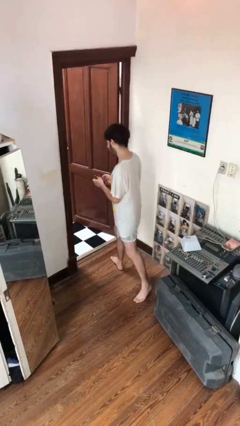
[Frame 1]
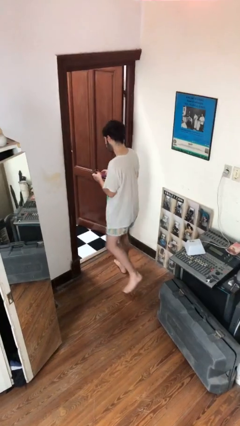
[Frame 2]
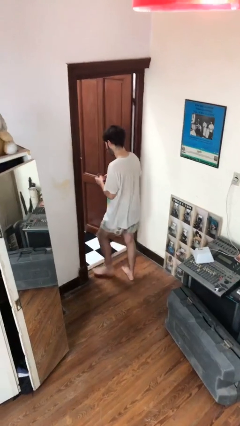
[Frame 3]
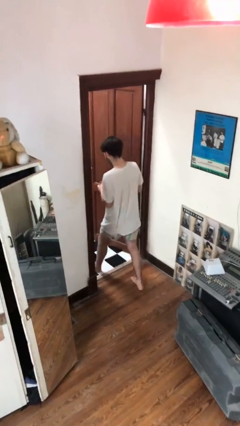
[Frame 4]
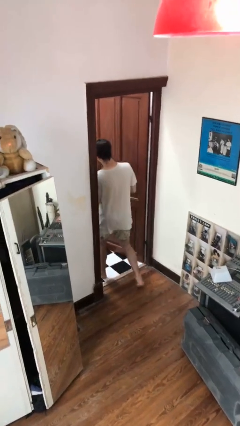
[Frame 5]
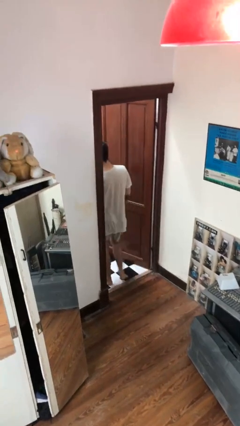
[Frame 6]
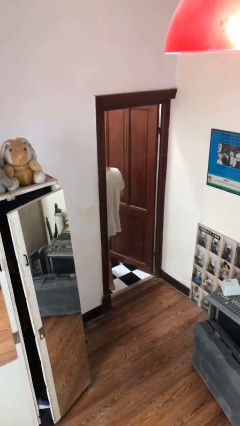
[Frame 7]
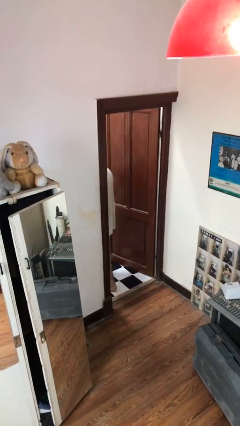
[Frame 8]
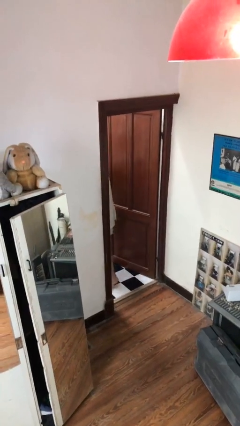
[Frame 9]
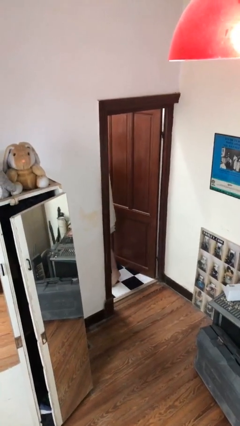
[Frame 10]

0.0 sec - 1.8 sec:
person exits scene through structure

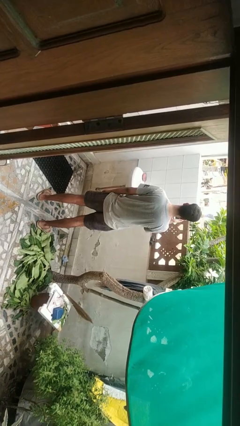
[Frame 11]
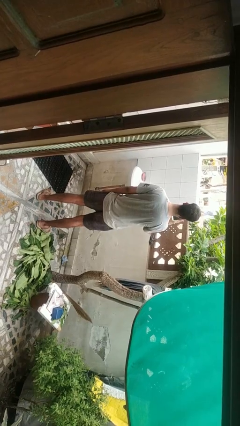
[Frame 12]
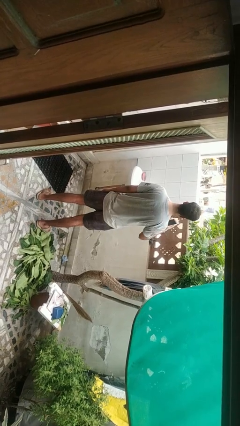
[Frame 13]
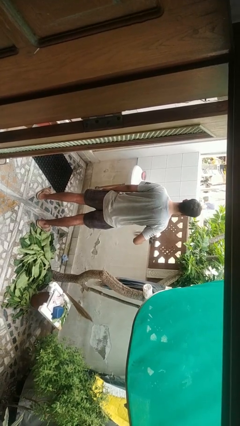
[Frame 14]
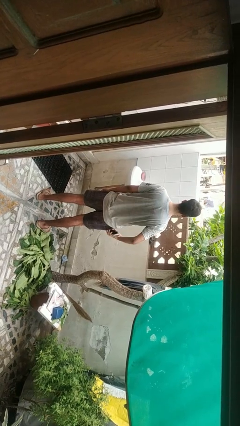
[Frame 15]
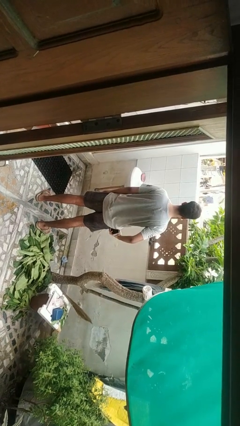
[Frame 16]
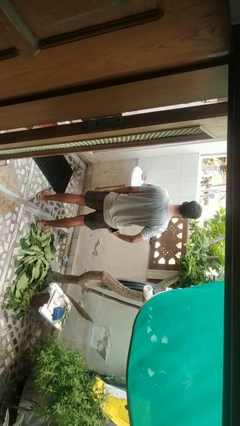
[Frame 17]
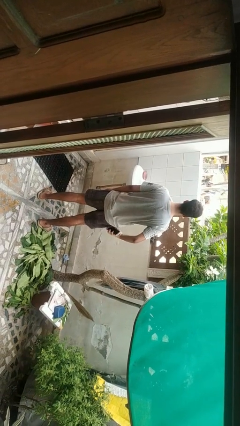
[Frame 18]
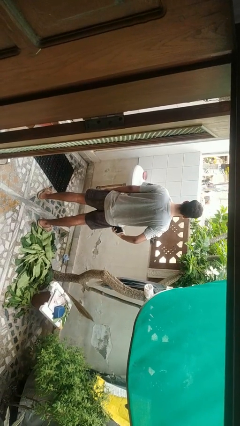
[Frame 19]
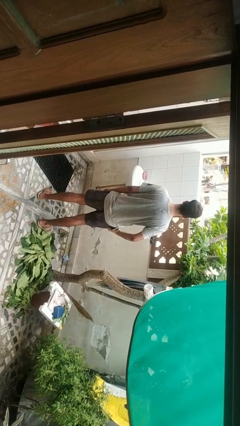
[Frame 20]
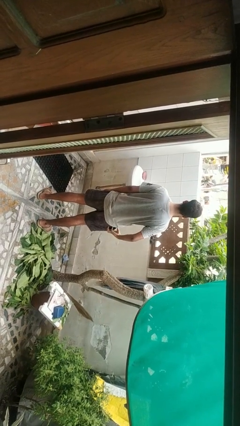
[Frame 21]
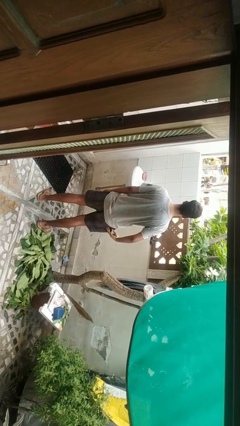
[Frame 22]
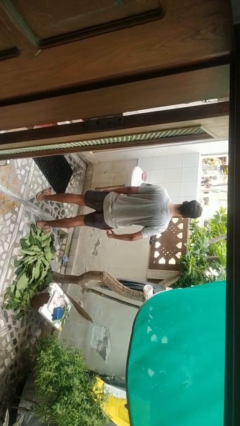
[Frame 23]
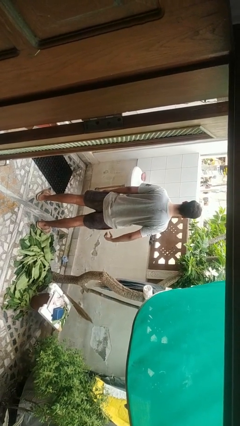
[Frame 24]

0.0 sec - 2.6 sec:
person puts phone into pocket

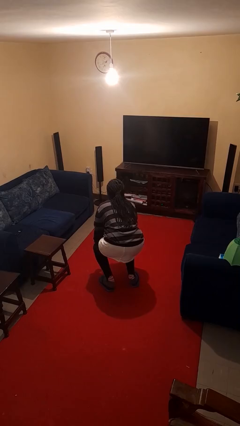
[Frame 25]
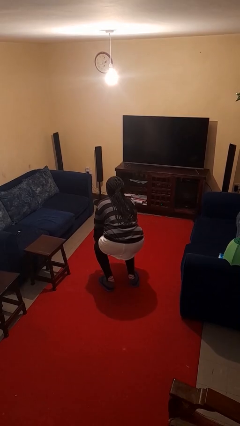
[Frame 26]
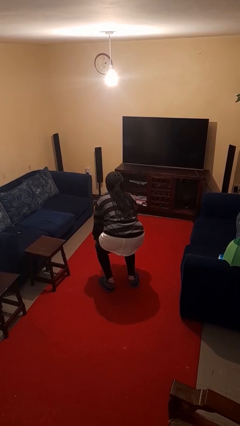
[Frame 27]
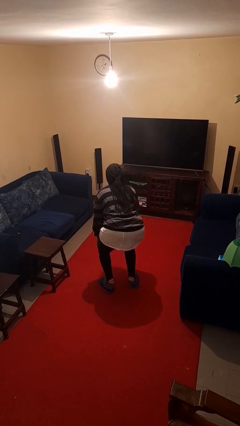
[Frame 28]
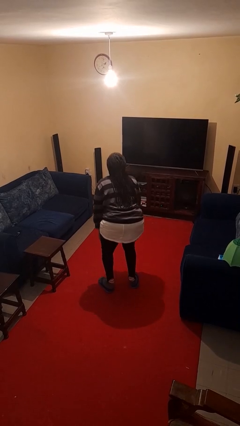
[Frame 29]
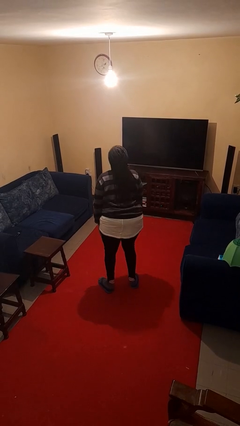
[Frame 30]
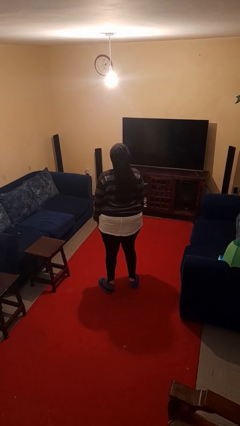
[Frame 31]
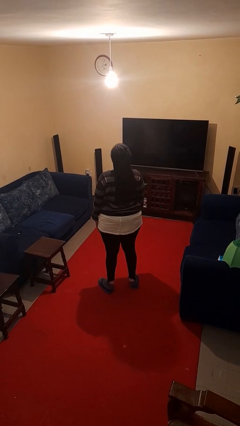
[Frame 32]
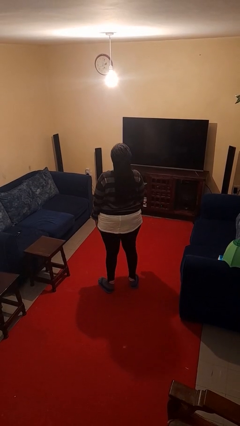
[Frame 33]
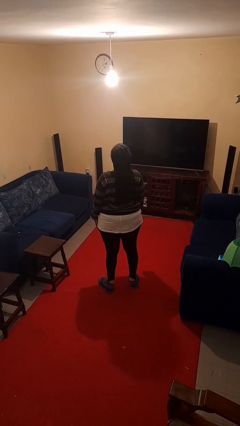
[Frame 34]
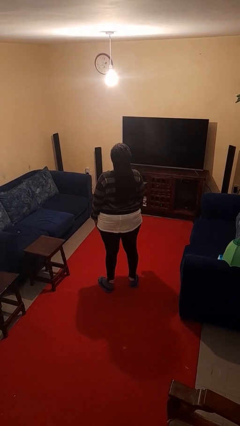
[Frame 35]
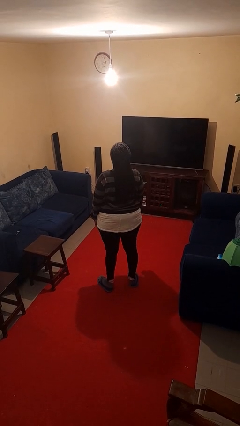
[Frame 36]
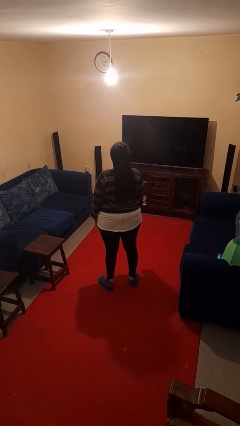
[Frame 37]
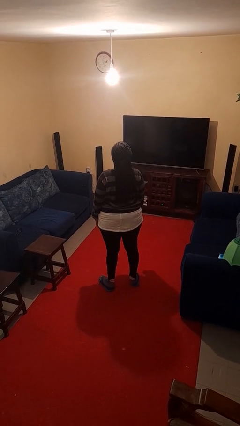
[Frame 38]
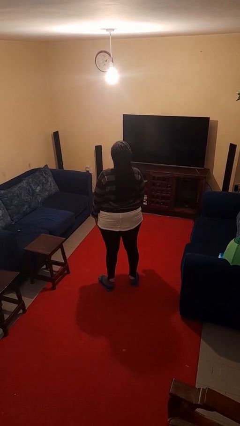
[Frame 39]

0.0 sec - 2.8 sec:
person stands up

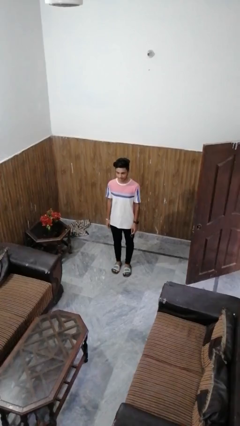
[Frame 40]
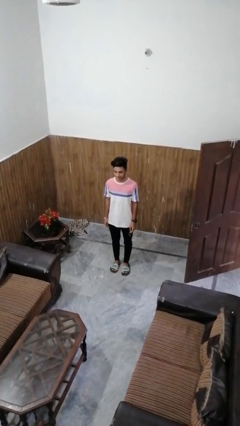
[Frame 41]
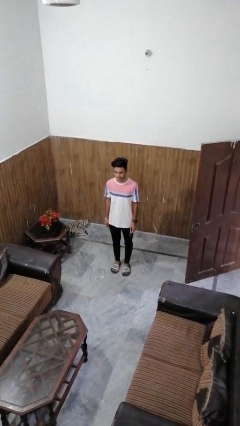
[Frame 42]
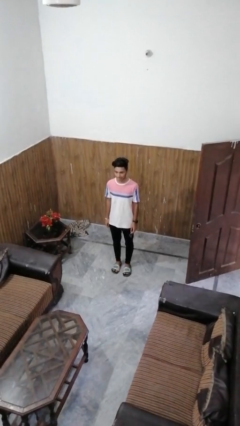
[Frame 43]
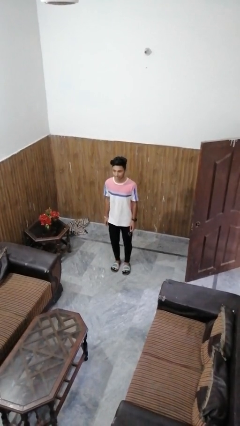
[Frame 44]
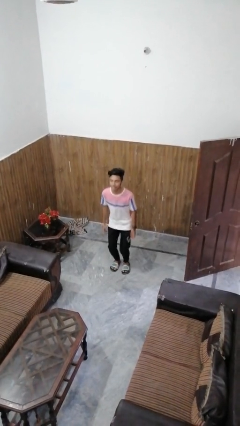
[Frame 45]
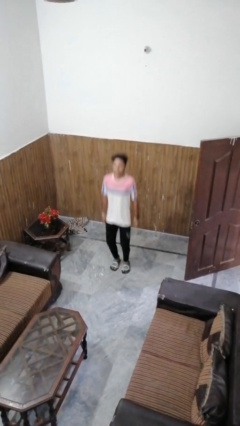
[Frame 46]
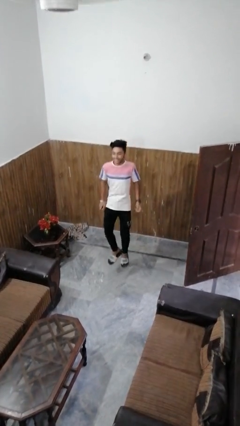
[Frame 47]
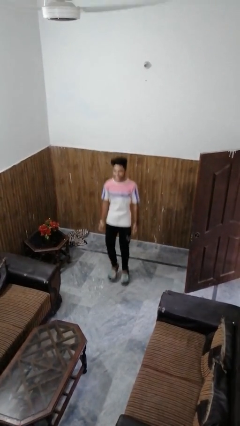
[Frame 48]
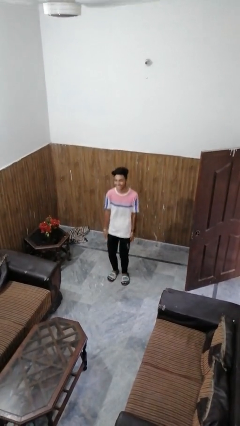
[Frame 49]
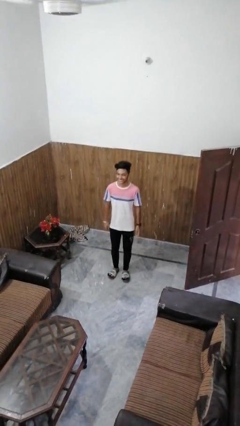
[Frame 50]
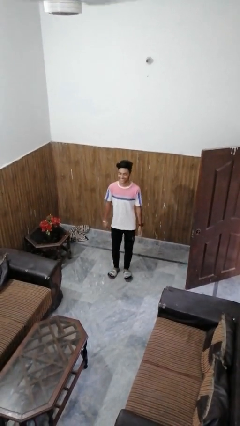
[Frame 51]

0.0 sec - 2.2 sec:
person jumps

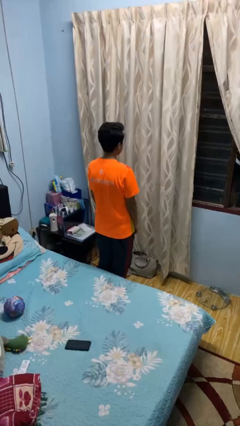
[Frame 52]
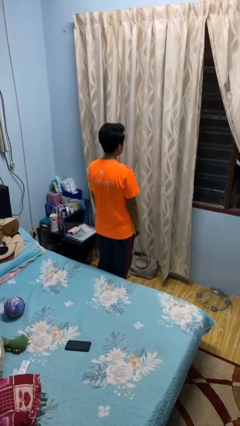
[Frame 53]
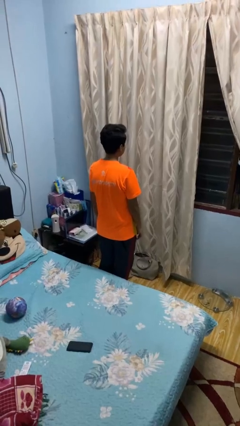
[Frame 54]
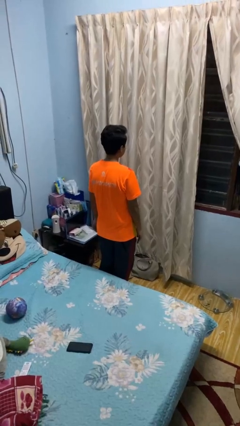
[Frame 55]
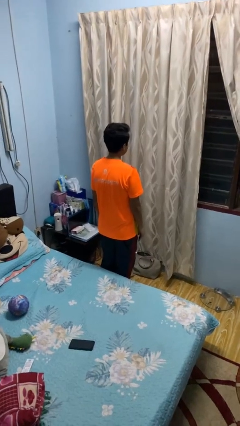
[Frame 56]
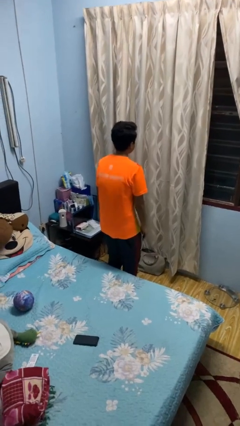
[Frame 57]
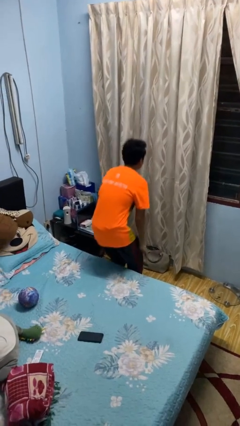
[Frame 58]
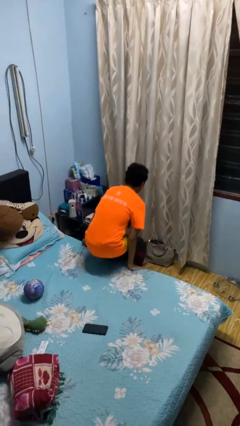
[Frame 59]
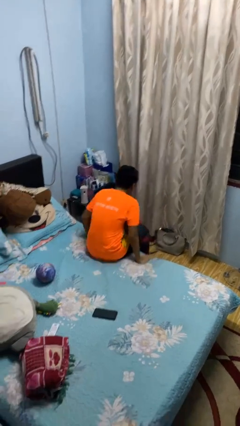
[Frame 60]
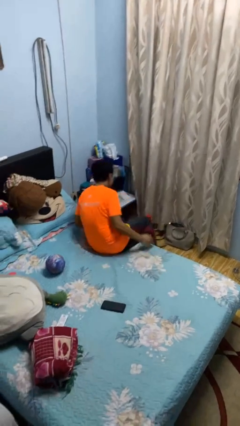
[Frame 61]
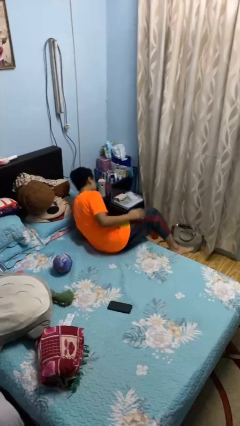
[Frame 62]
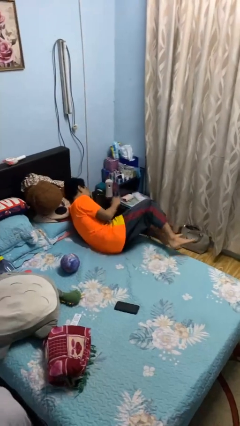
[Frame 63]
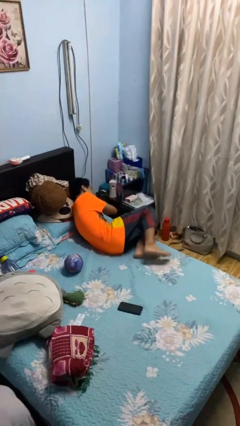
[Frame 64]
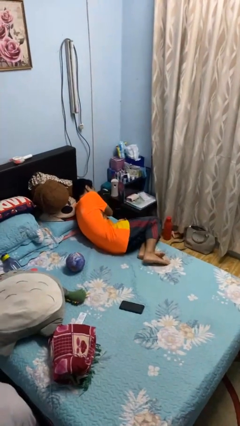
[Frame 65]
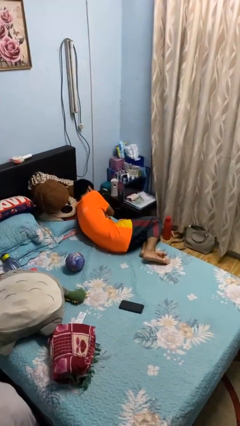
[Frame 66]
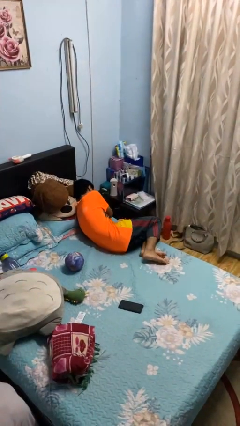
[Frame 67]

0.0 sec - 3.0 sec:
person lies down on bed

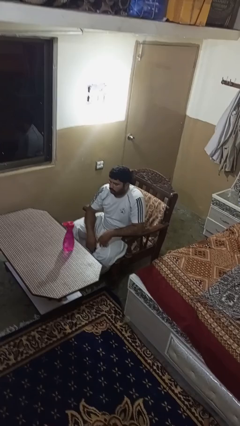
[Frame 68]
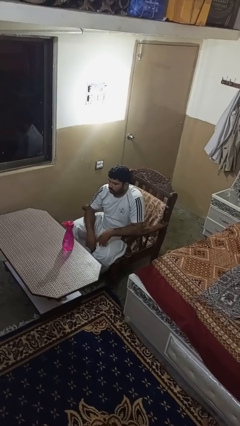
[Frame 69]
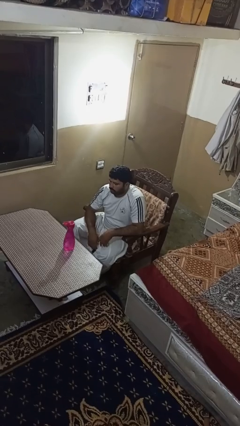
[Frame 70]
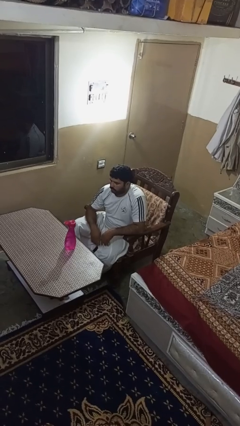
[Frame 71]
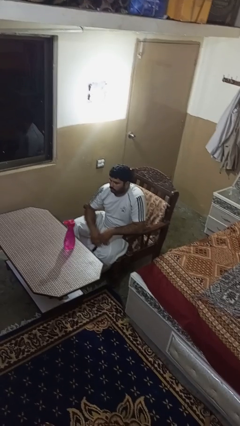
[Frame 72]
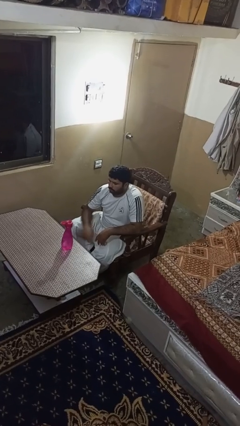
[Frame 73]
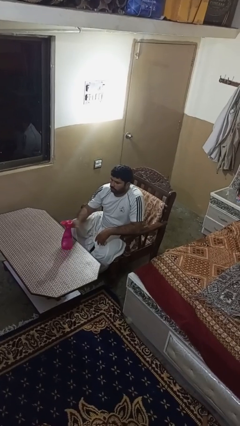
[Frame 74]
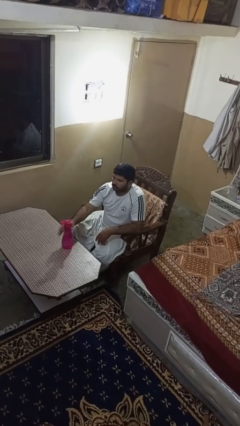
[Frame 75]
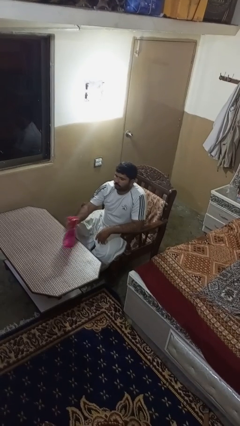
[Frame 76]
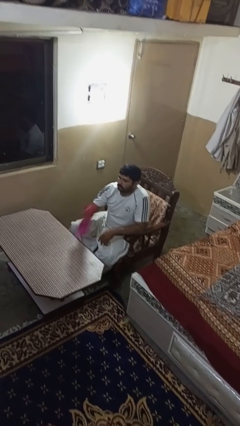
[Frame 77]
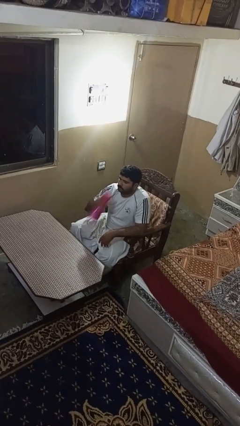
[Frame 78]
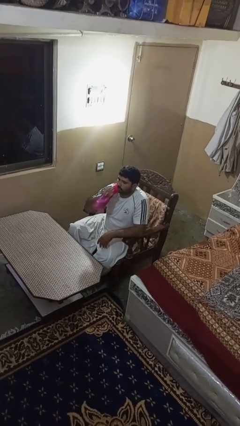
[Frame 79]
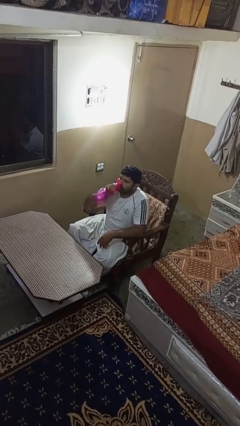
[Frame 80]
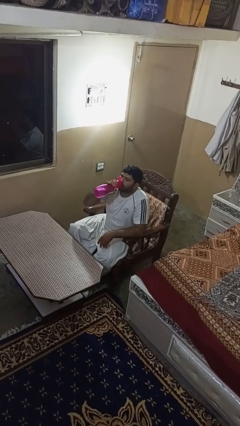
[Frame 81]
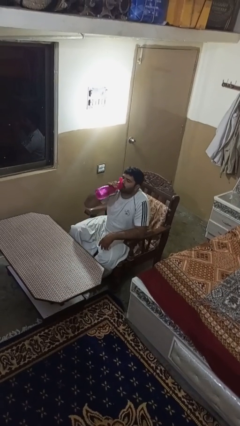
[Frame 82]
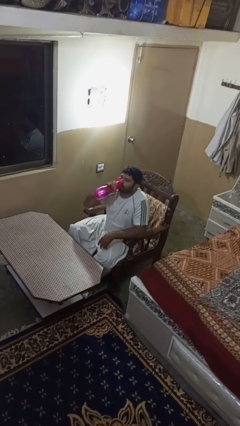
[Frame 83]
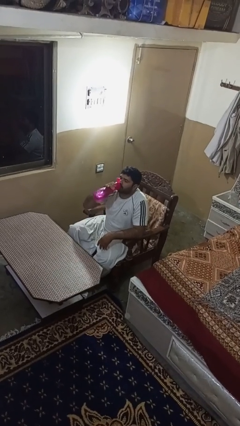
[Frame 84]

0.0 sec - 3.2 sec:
person drinks from bottle

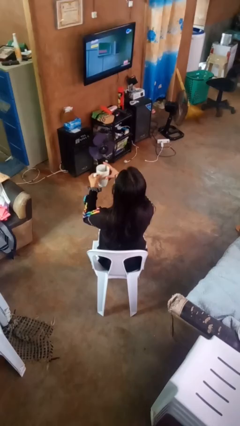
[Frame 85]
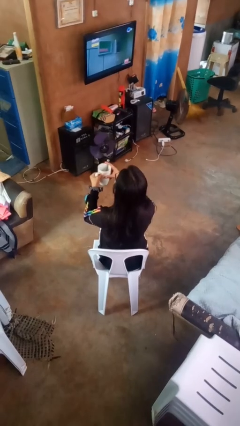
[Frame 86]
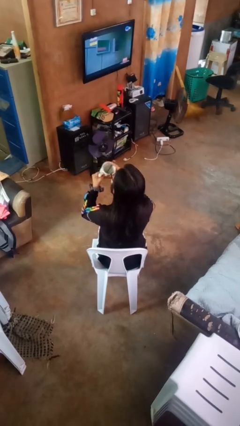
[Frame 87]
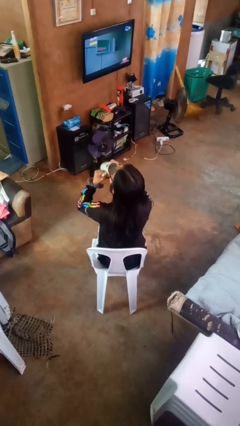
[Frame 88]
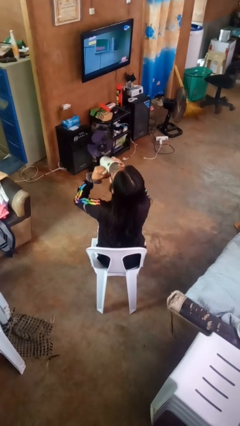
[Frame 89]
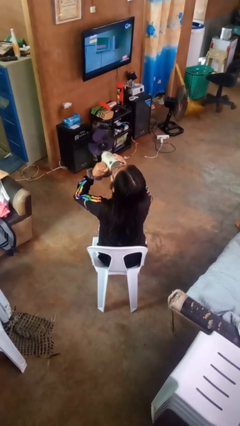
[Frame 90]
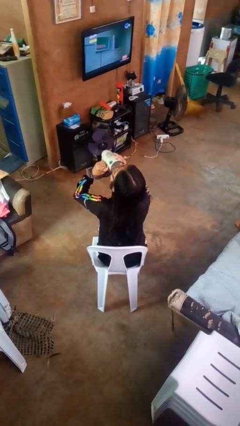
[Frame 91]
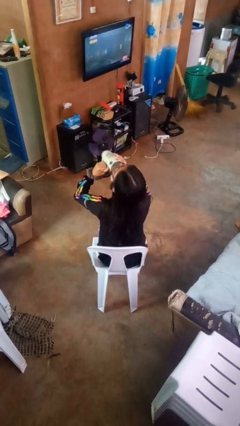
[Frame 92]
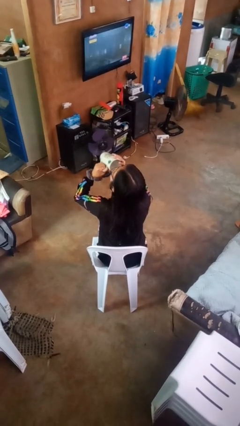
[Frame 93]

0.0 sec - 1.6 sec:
person drinks from mug
